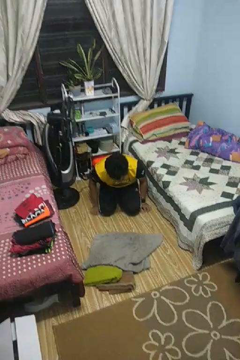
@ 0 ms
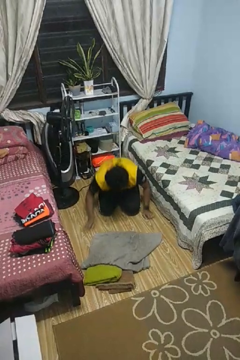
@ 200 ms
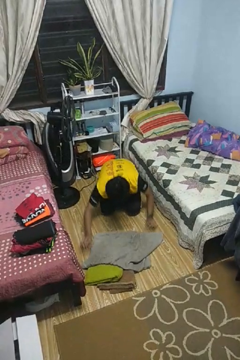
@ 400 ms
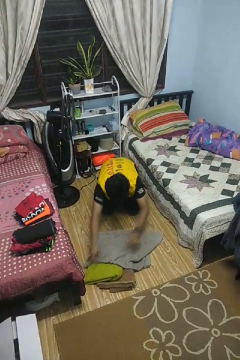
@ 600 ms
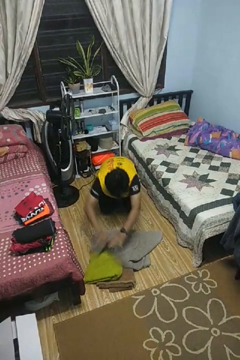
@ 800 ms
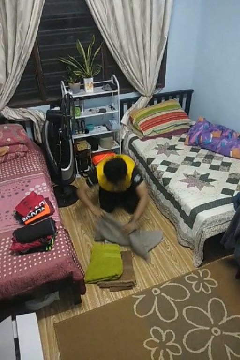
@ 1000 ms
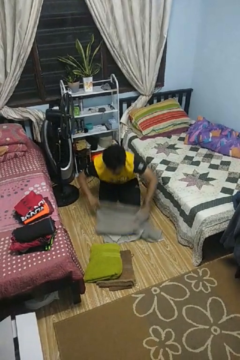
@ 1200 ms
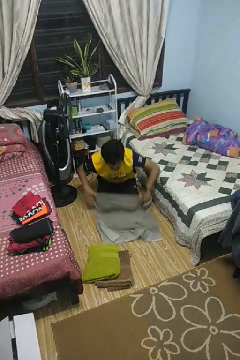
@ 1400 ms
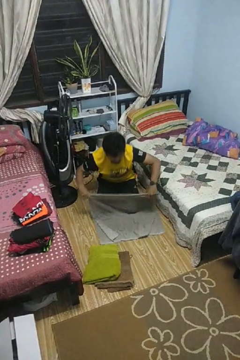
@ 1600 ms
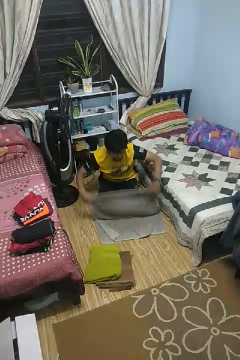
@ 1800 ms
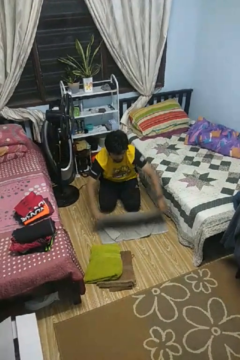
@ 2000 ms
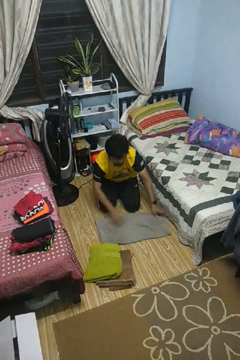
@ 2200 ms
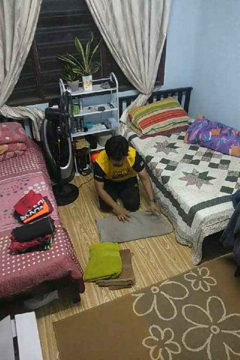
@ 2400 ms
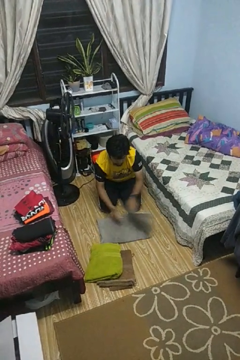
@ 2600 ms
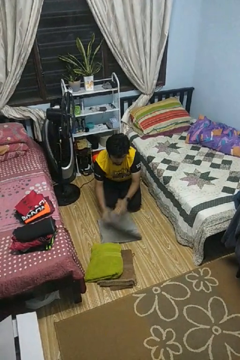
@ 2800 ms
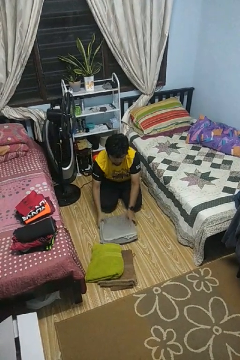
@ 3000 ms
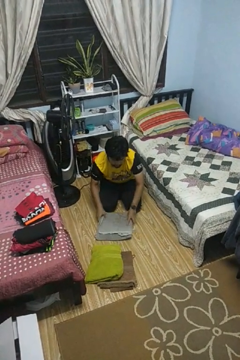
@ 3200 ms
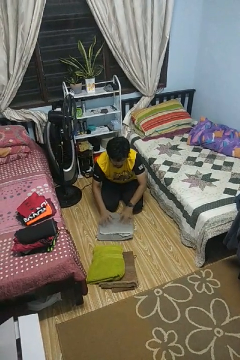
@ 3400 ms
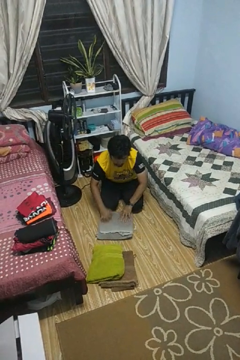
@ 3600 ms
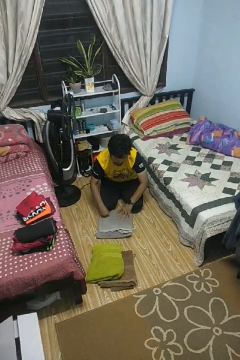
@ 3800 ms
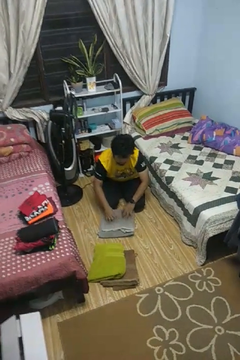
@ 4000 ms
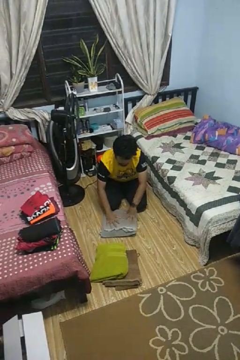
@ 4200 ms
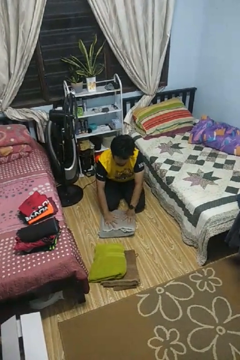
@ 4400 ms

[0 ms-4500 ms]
person folds towel

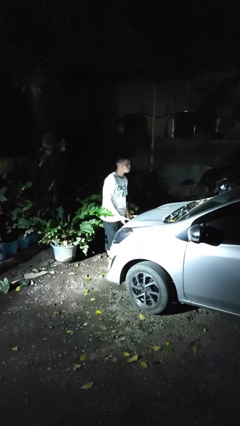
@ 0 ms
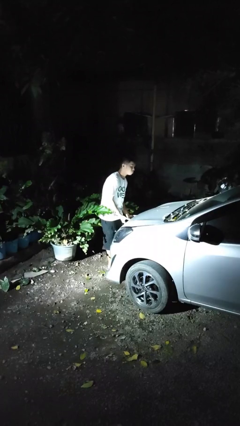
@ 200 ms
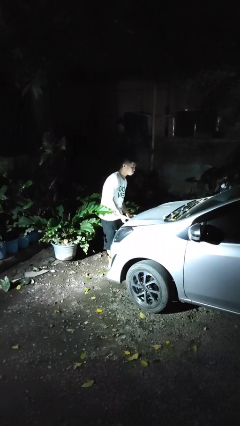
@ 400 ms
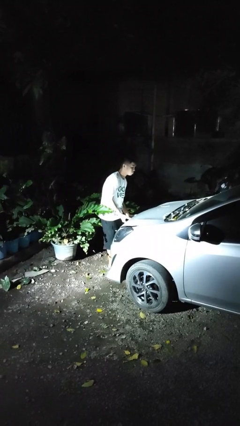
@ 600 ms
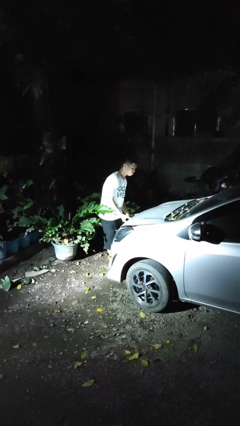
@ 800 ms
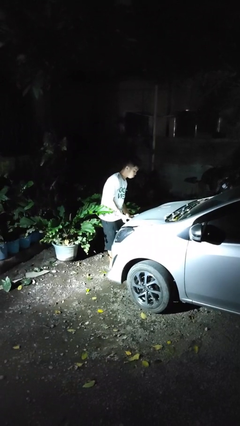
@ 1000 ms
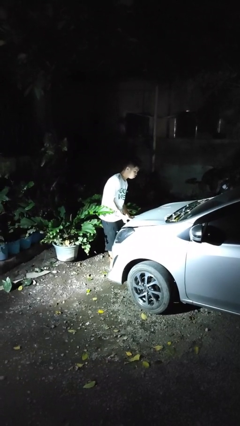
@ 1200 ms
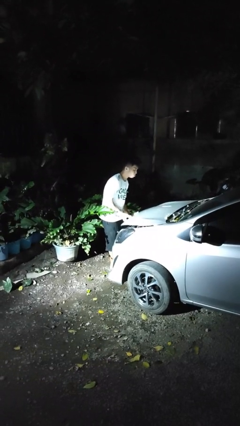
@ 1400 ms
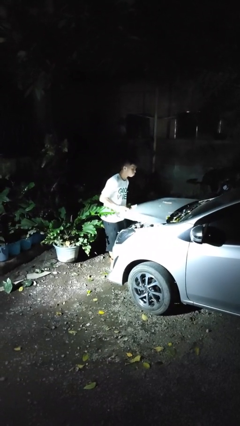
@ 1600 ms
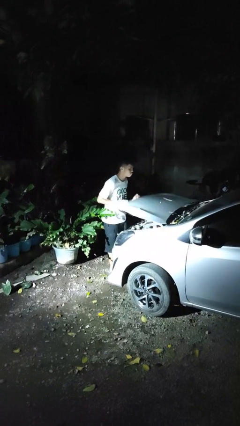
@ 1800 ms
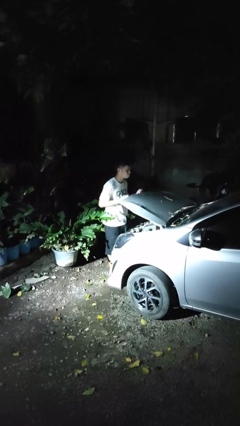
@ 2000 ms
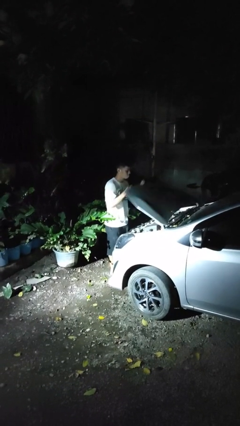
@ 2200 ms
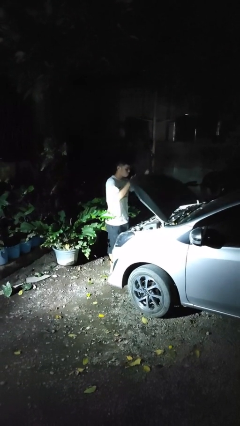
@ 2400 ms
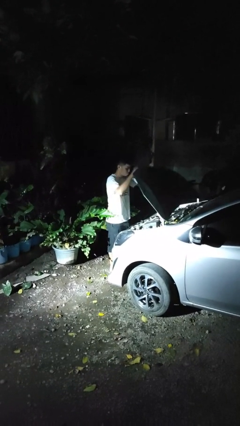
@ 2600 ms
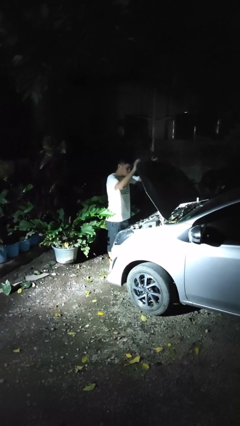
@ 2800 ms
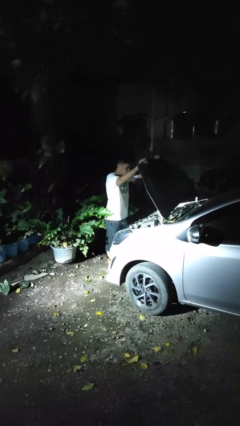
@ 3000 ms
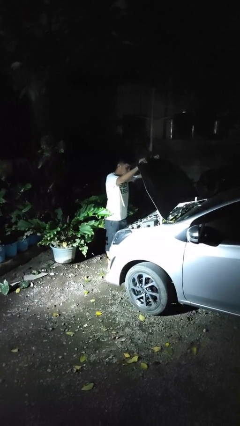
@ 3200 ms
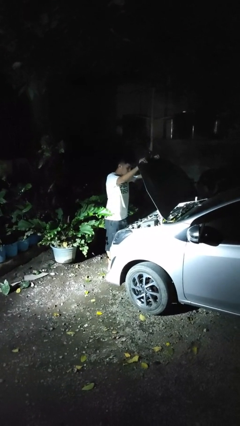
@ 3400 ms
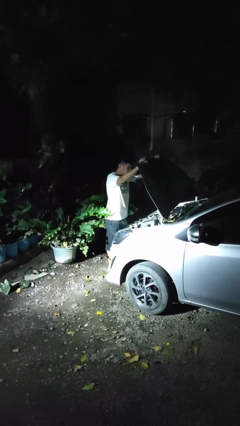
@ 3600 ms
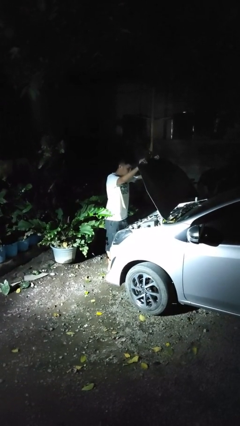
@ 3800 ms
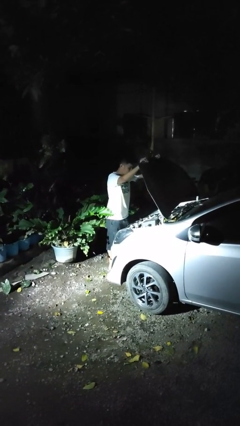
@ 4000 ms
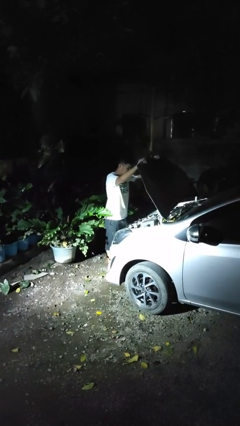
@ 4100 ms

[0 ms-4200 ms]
person opens car hood

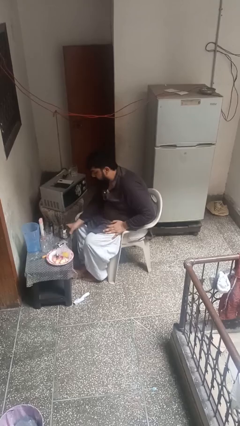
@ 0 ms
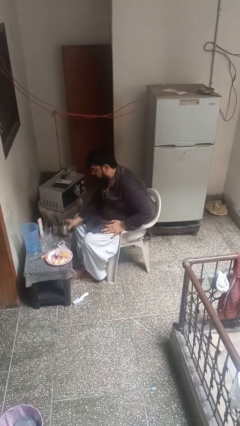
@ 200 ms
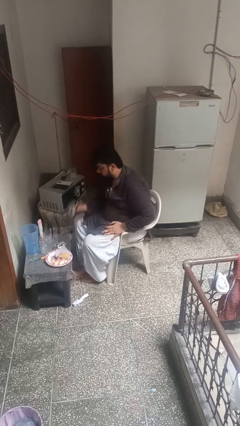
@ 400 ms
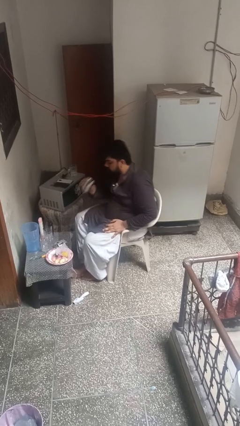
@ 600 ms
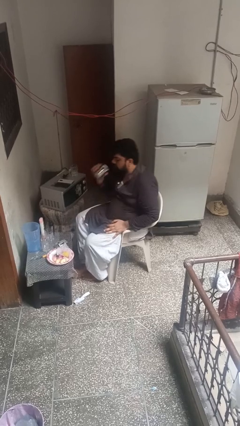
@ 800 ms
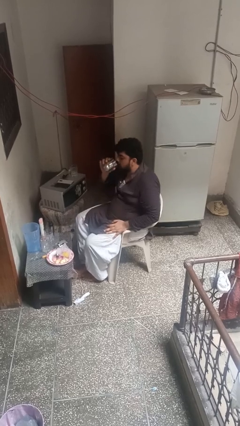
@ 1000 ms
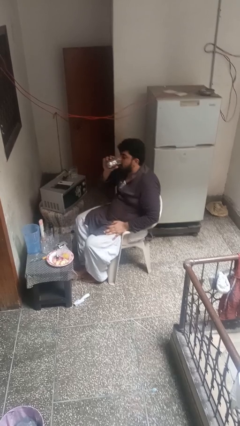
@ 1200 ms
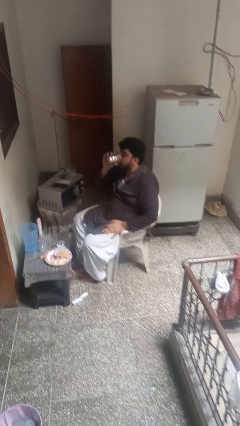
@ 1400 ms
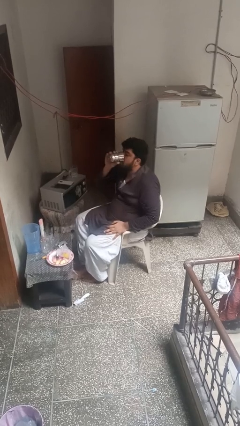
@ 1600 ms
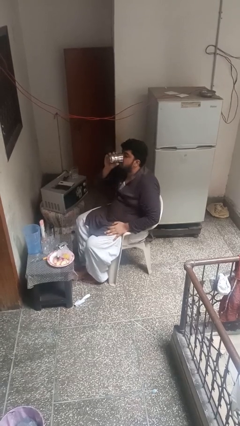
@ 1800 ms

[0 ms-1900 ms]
person drinks from cup

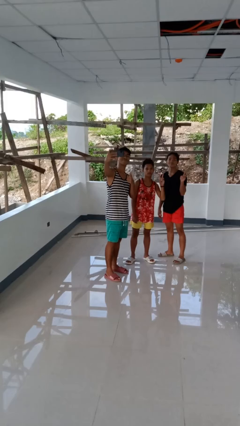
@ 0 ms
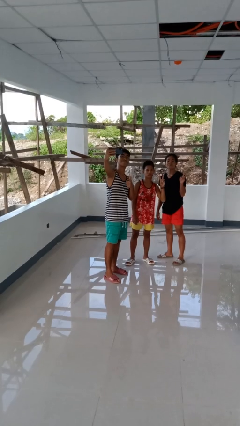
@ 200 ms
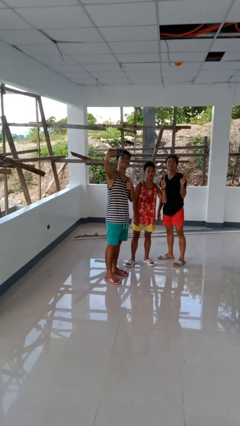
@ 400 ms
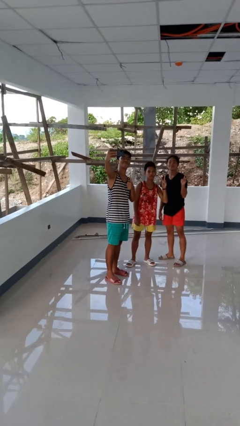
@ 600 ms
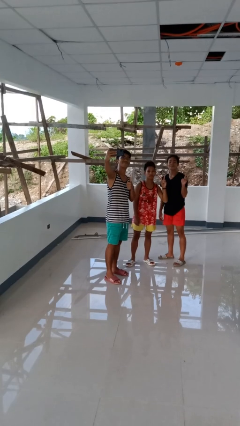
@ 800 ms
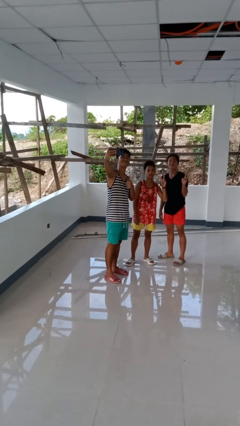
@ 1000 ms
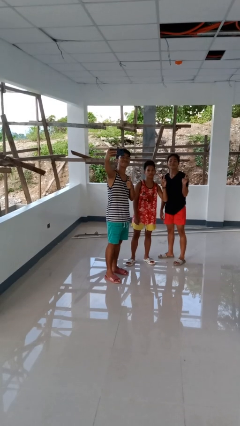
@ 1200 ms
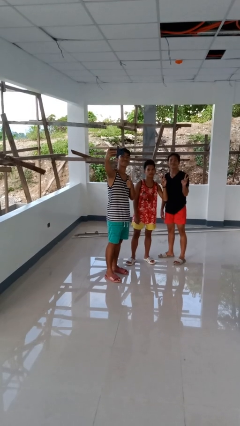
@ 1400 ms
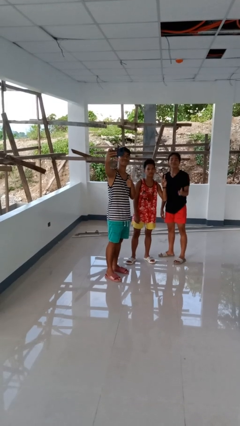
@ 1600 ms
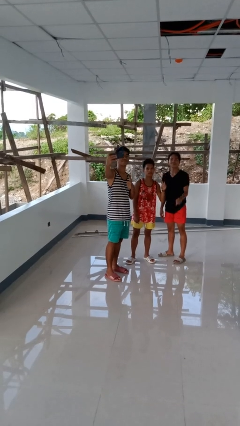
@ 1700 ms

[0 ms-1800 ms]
person takes selfie with person

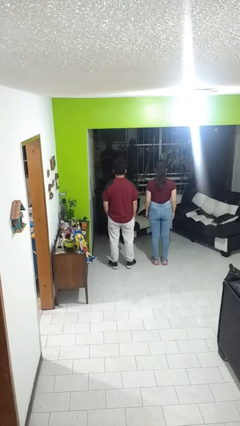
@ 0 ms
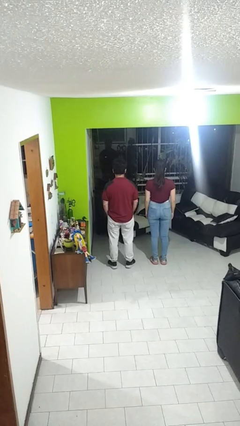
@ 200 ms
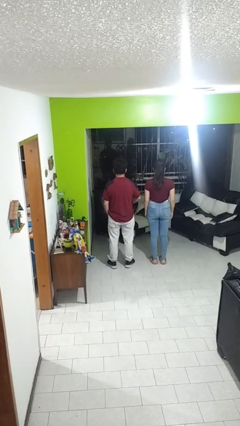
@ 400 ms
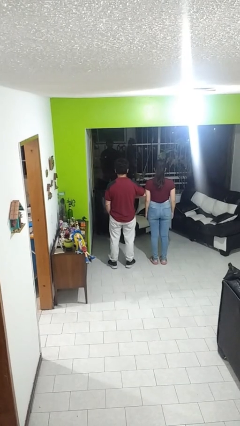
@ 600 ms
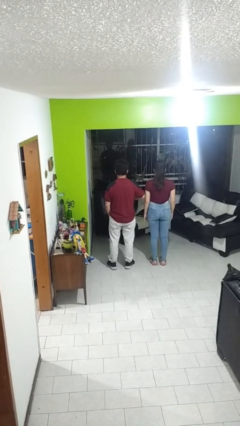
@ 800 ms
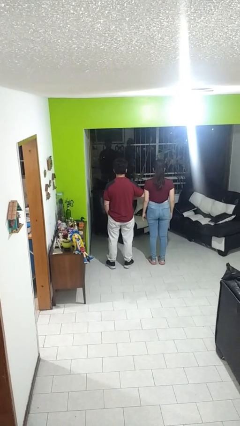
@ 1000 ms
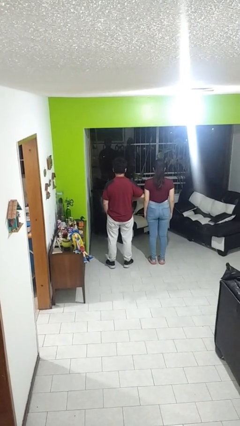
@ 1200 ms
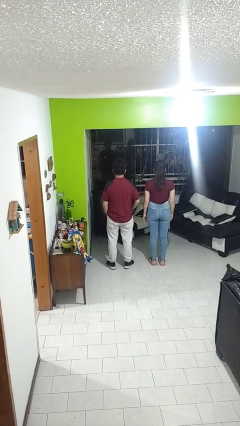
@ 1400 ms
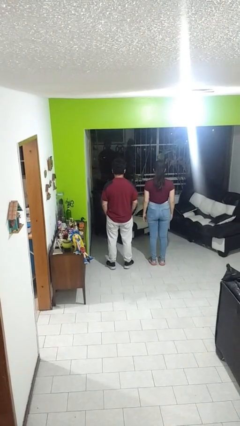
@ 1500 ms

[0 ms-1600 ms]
person nudges person with elbow

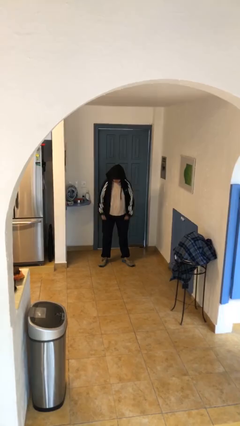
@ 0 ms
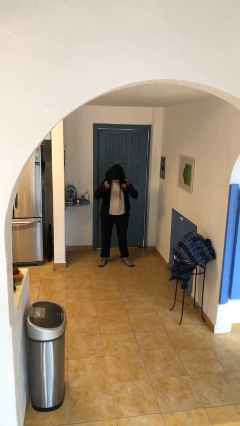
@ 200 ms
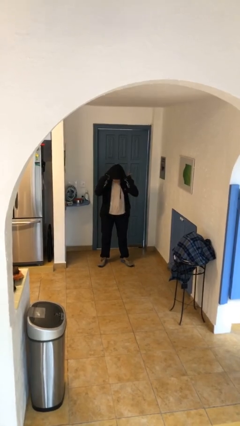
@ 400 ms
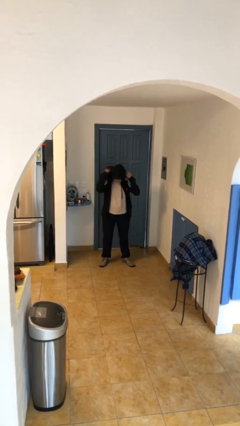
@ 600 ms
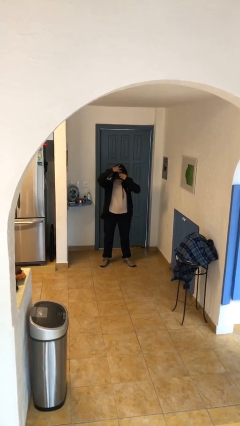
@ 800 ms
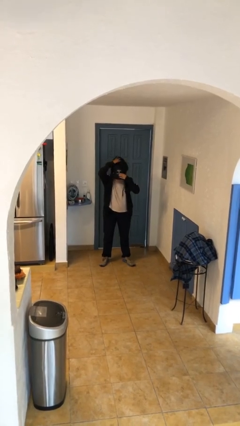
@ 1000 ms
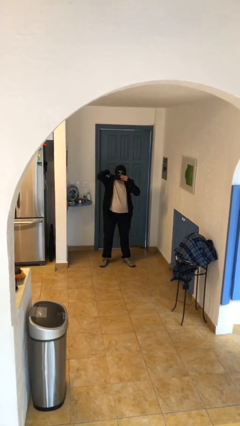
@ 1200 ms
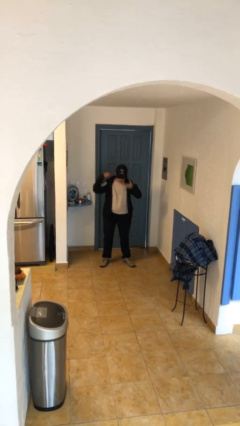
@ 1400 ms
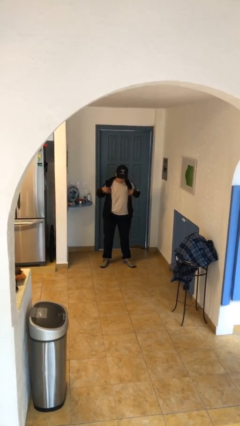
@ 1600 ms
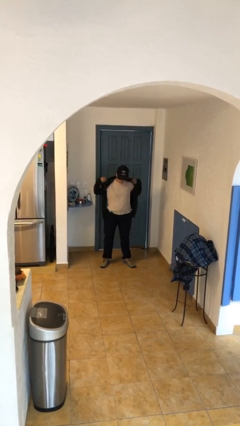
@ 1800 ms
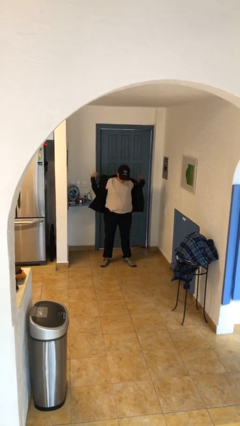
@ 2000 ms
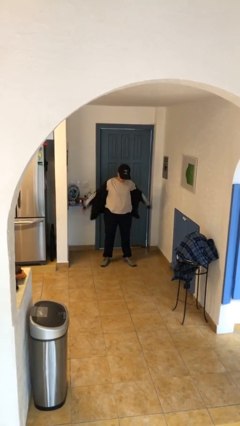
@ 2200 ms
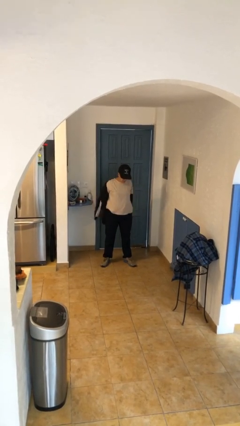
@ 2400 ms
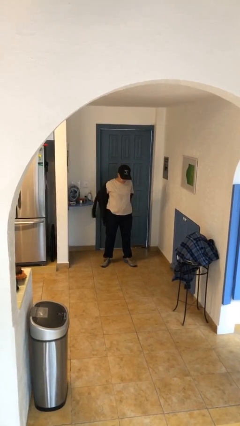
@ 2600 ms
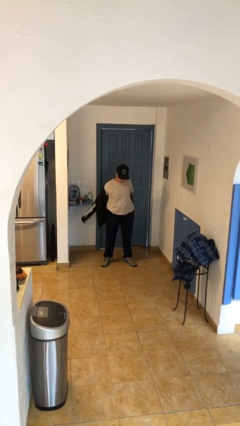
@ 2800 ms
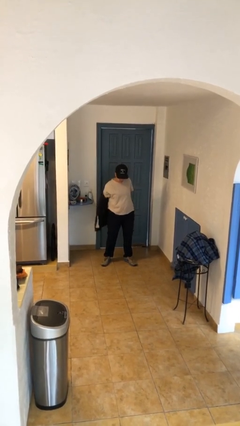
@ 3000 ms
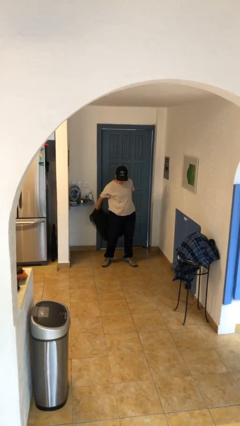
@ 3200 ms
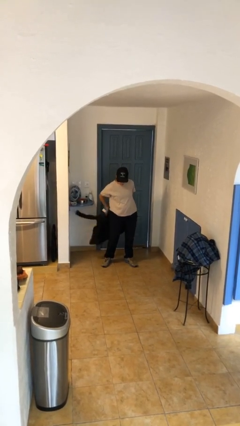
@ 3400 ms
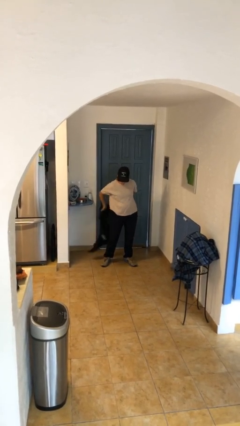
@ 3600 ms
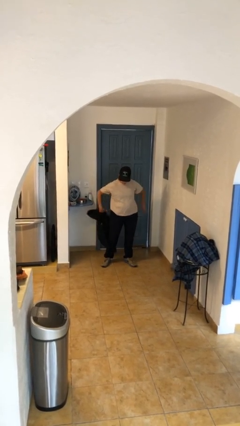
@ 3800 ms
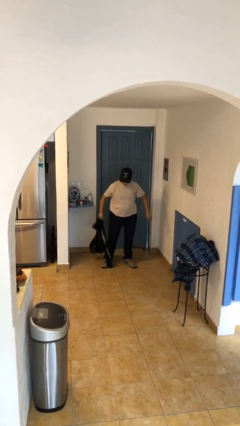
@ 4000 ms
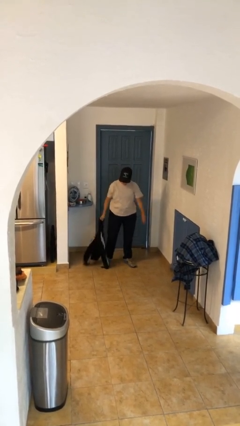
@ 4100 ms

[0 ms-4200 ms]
person takes off hoodie

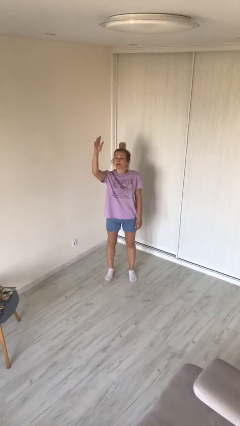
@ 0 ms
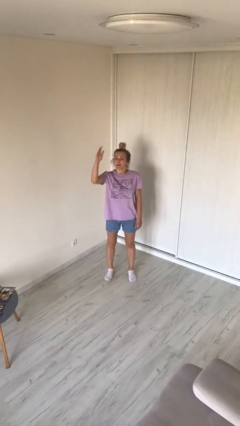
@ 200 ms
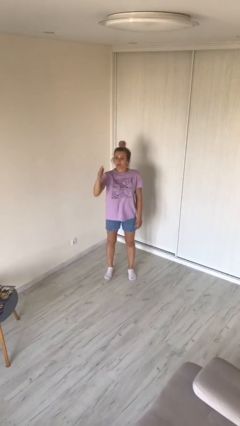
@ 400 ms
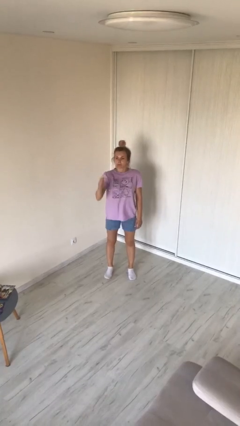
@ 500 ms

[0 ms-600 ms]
person gestures lower hand
